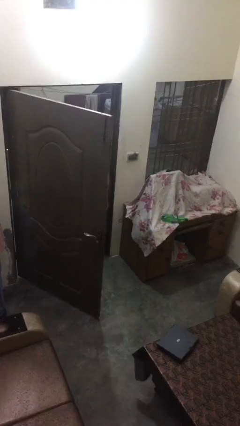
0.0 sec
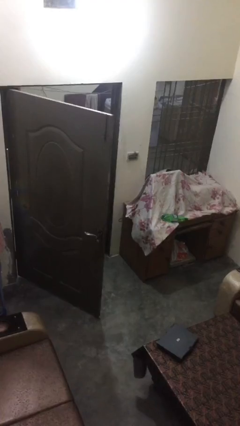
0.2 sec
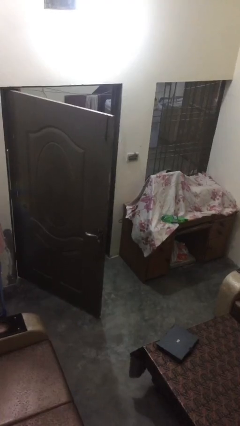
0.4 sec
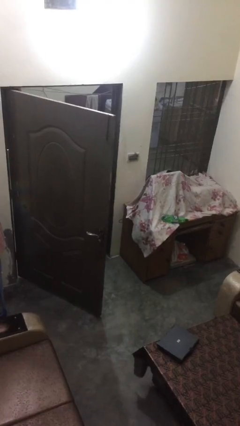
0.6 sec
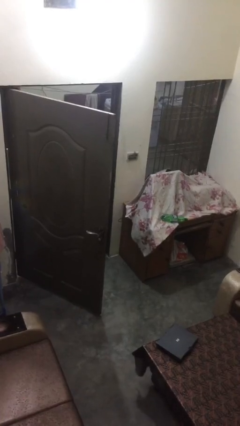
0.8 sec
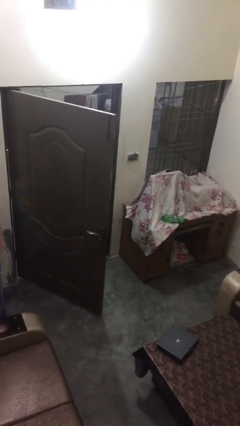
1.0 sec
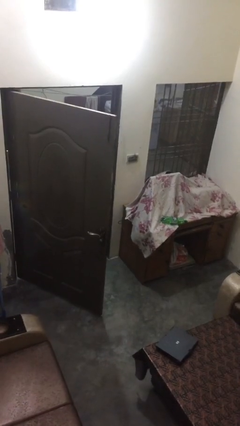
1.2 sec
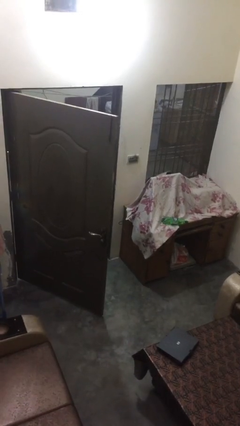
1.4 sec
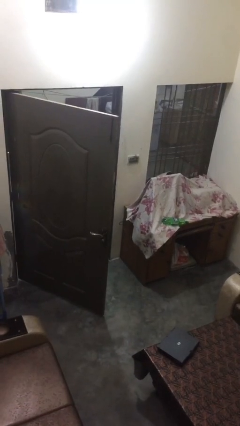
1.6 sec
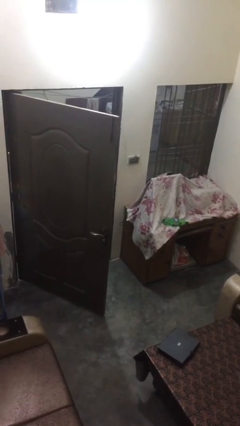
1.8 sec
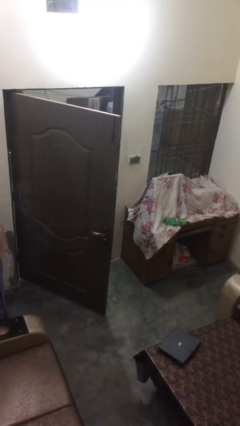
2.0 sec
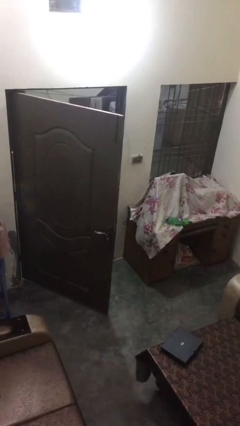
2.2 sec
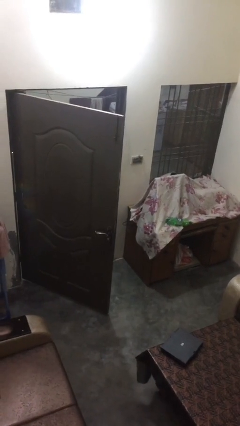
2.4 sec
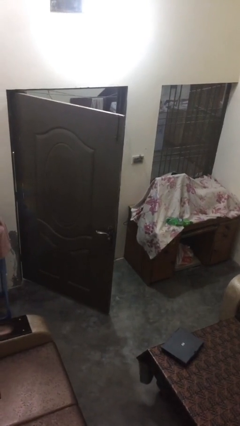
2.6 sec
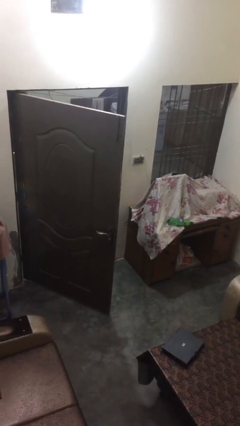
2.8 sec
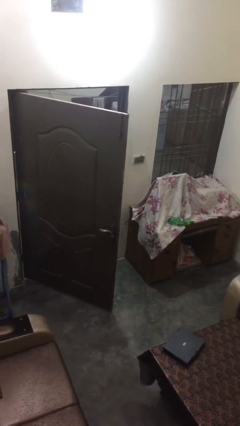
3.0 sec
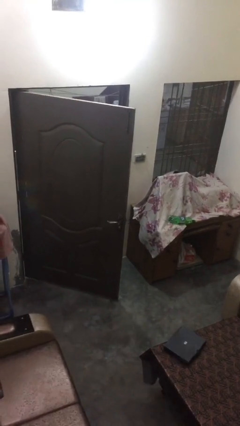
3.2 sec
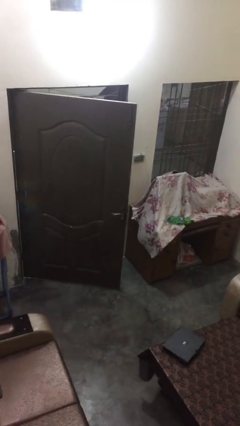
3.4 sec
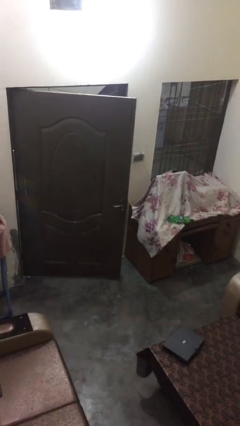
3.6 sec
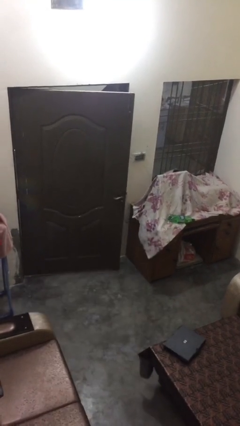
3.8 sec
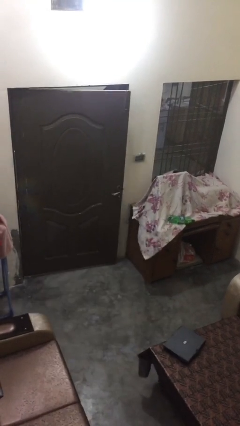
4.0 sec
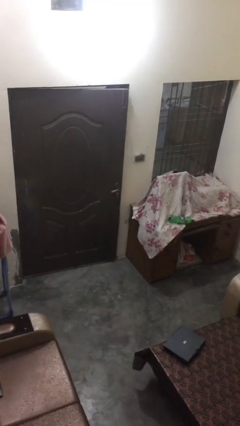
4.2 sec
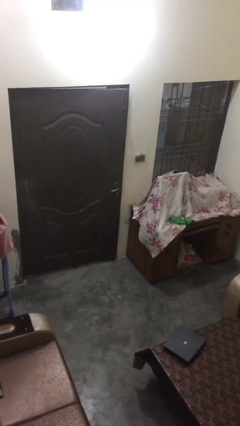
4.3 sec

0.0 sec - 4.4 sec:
person closes facility door

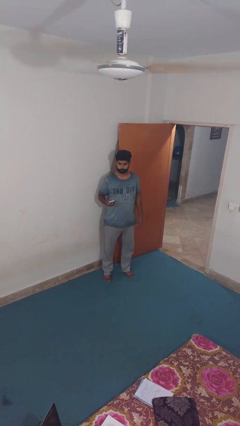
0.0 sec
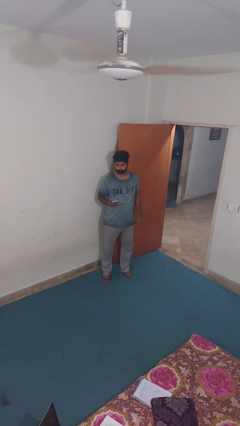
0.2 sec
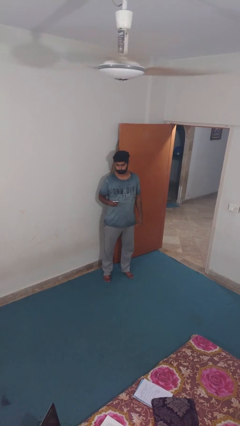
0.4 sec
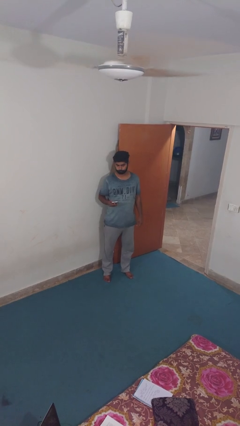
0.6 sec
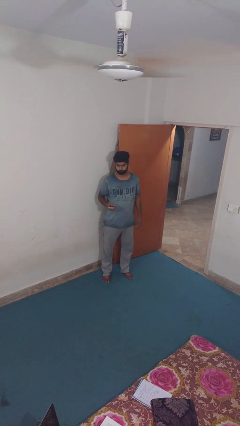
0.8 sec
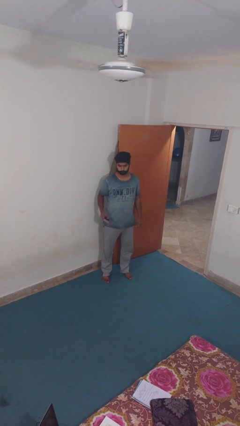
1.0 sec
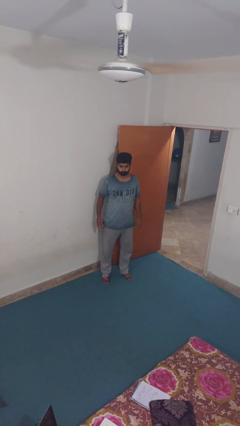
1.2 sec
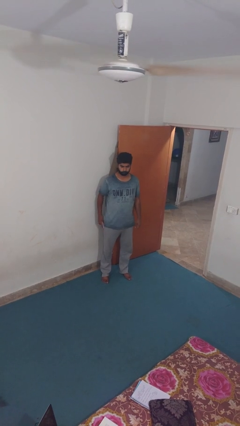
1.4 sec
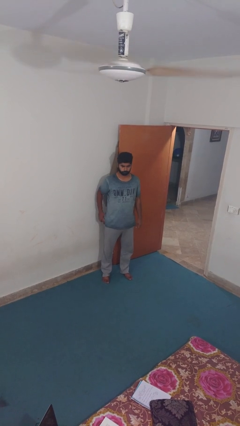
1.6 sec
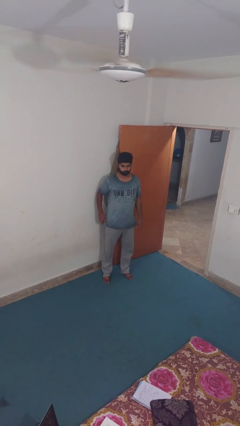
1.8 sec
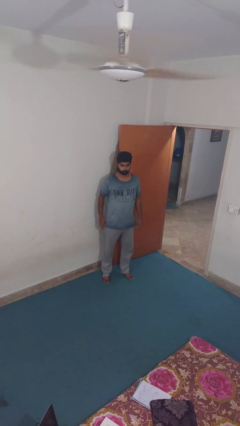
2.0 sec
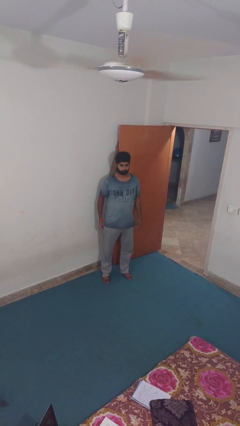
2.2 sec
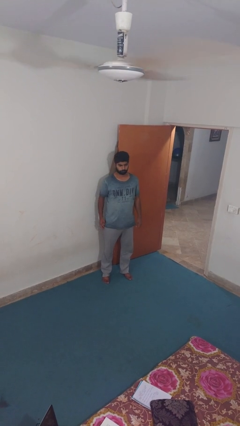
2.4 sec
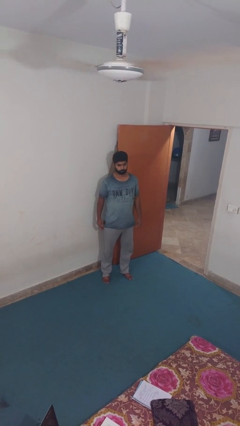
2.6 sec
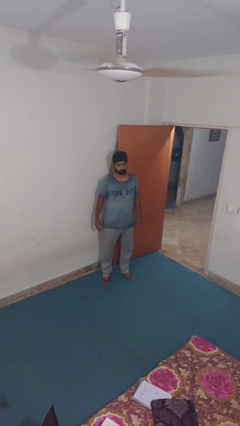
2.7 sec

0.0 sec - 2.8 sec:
person puts phone into pocket

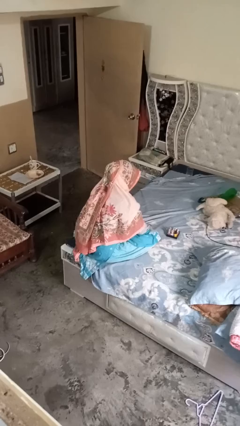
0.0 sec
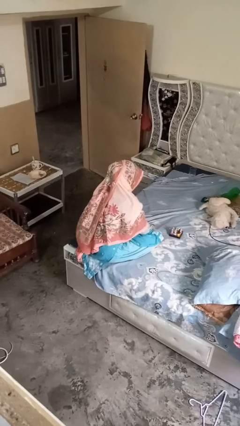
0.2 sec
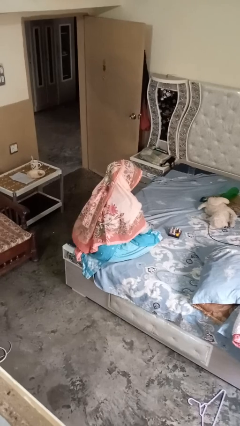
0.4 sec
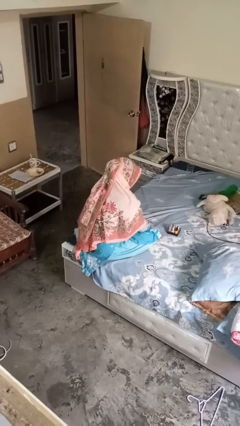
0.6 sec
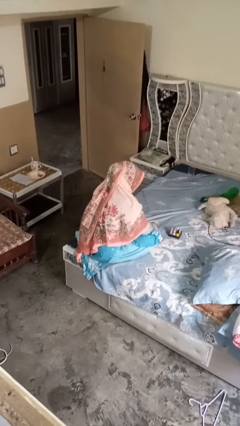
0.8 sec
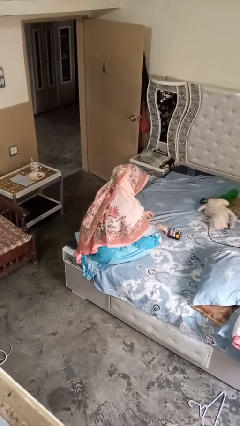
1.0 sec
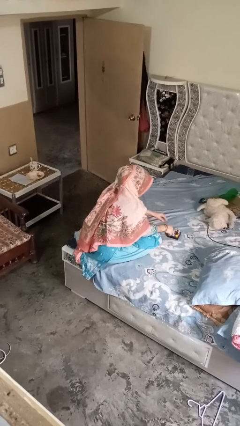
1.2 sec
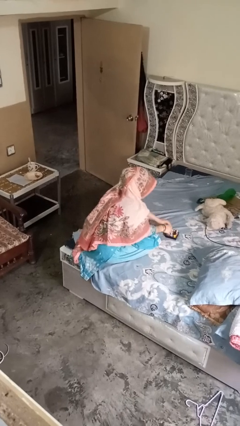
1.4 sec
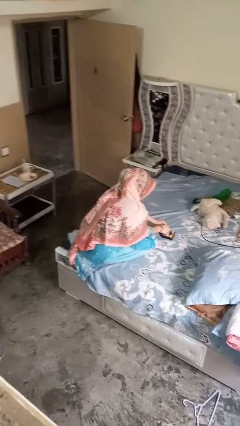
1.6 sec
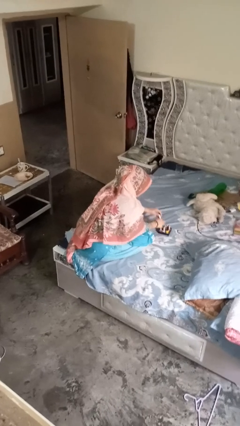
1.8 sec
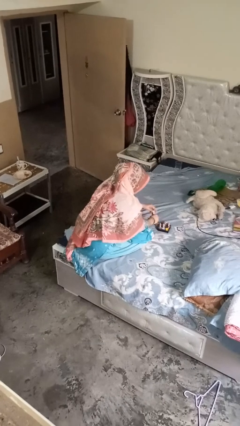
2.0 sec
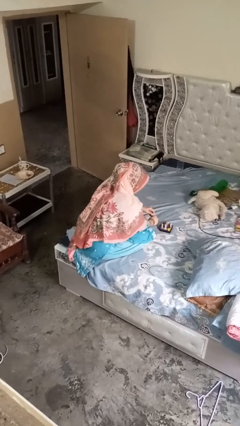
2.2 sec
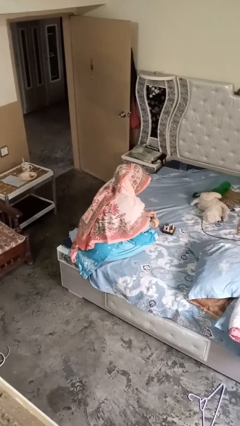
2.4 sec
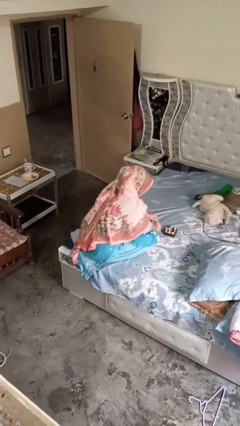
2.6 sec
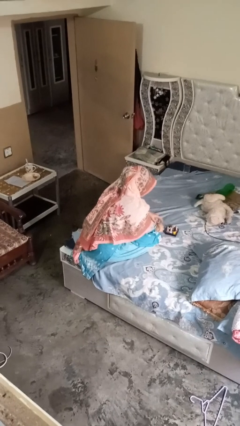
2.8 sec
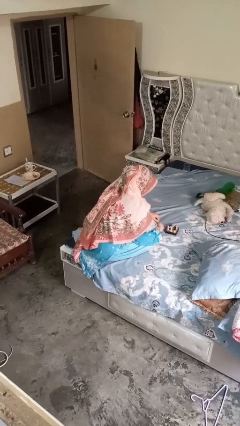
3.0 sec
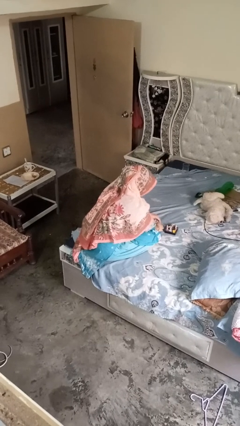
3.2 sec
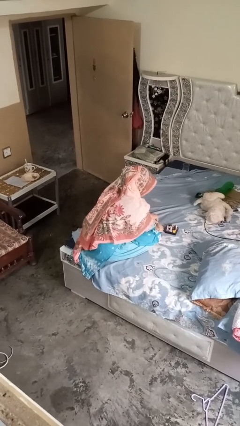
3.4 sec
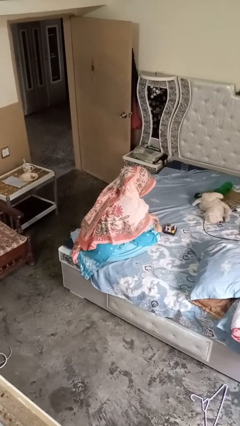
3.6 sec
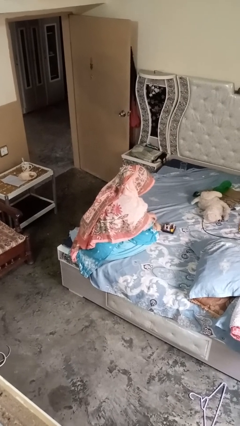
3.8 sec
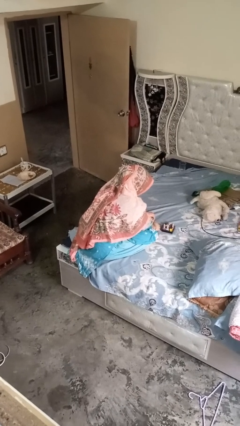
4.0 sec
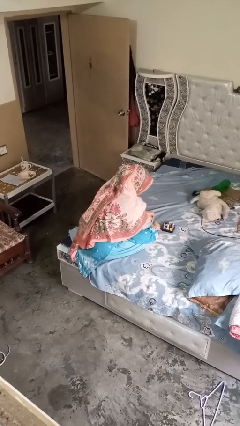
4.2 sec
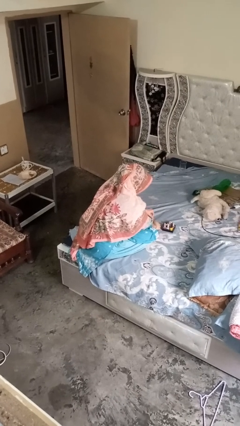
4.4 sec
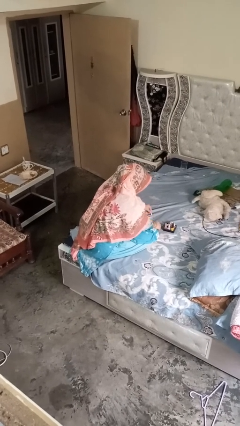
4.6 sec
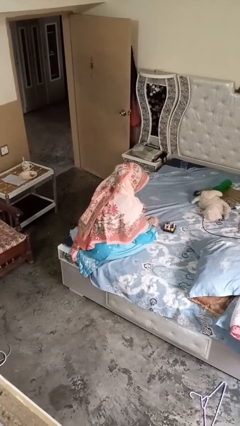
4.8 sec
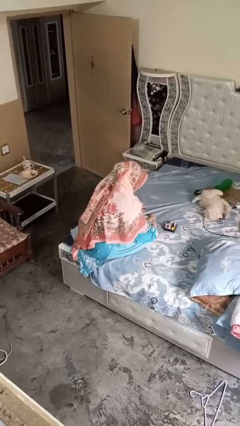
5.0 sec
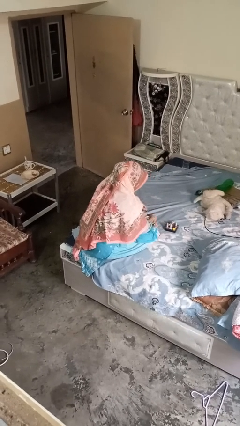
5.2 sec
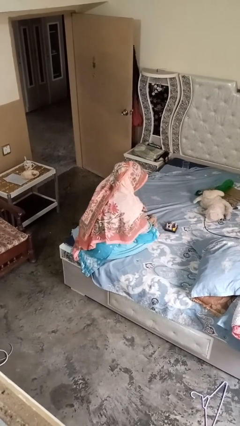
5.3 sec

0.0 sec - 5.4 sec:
person paints fingernails

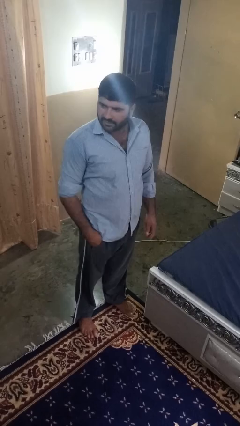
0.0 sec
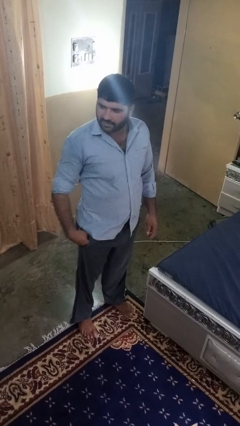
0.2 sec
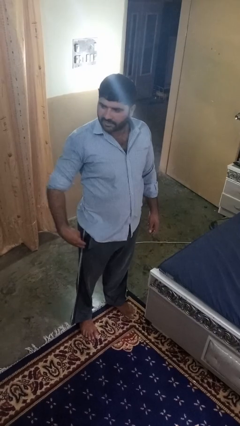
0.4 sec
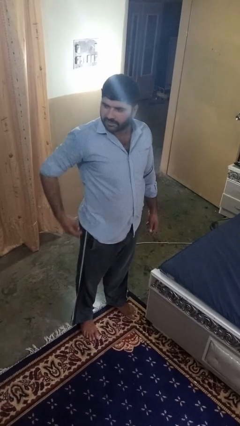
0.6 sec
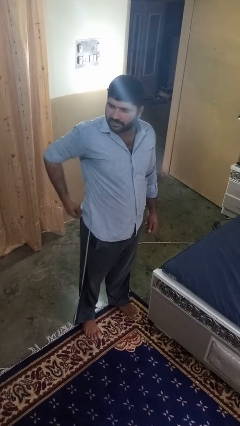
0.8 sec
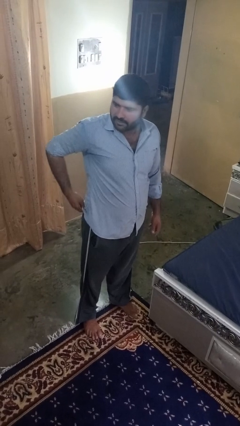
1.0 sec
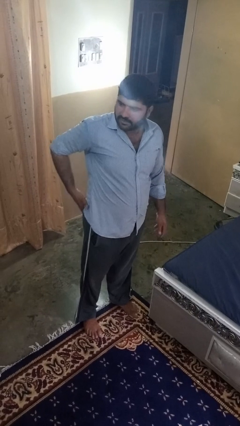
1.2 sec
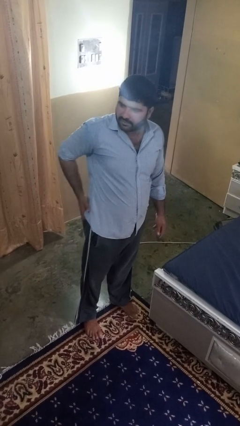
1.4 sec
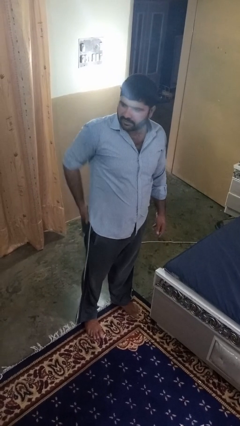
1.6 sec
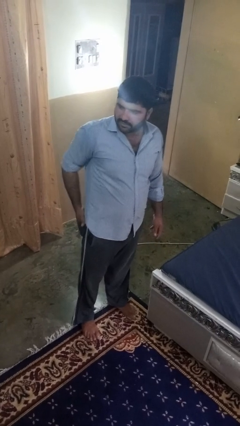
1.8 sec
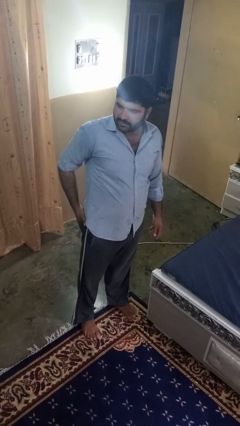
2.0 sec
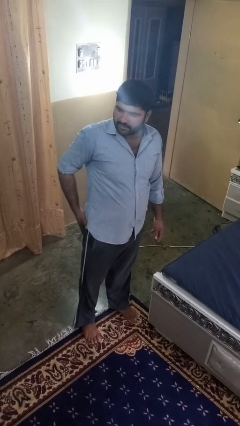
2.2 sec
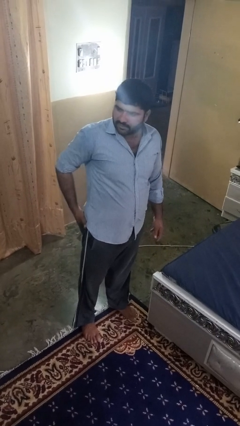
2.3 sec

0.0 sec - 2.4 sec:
person puts hands in back pockets

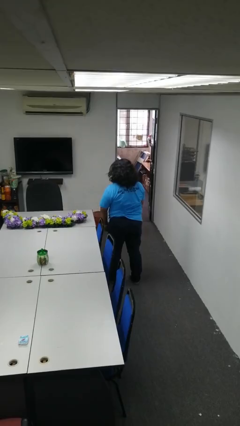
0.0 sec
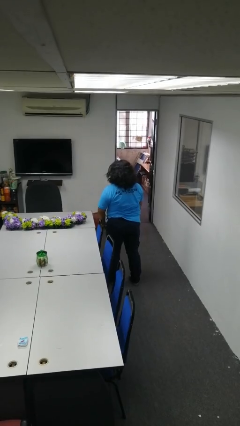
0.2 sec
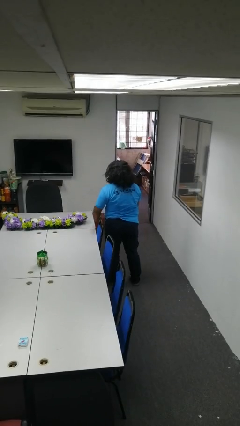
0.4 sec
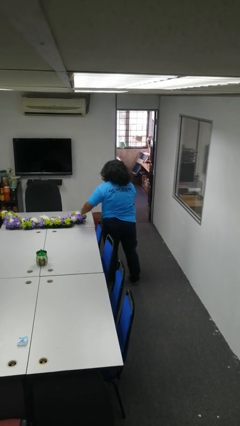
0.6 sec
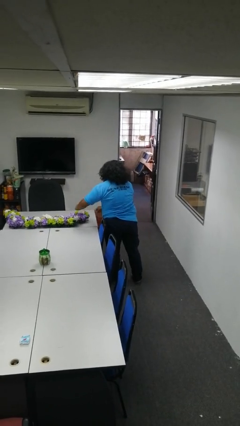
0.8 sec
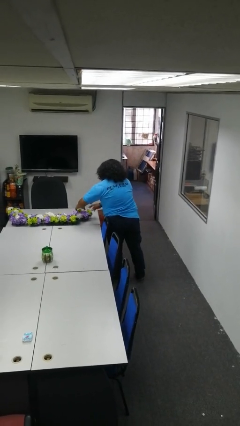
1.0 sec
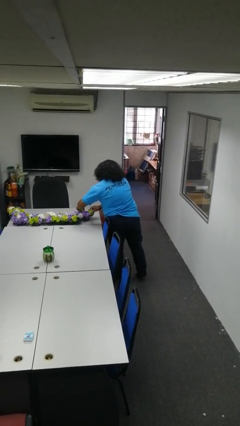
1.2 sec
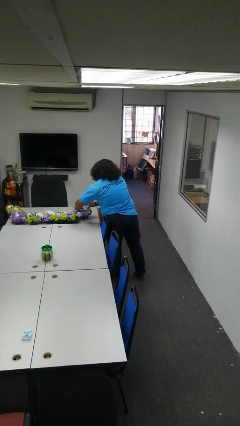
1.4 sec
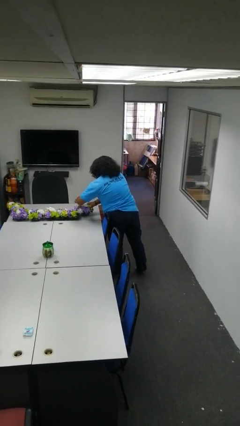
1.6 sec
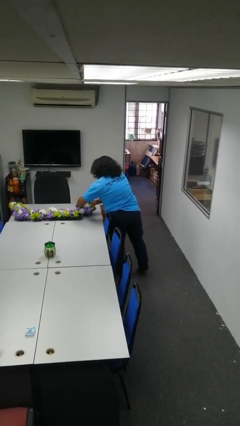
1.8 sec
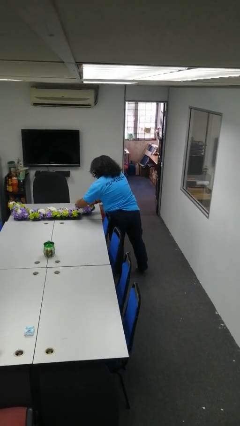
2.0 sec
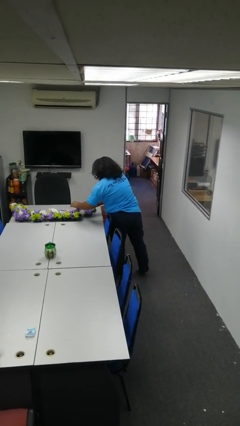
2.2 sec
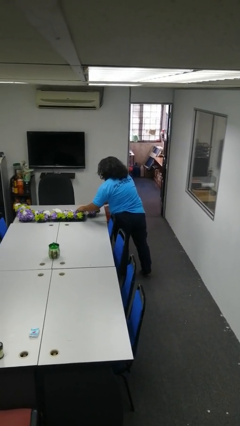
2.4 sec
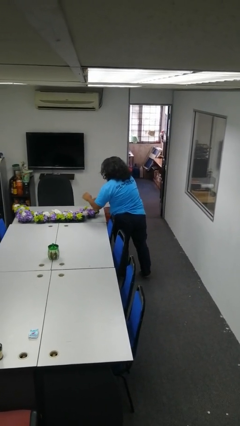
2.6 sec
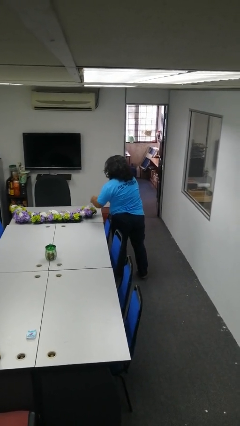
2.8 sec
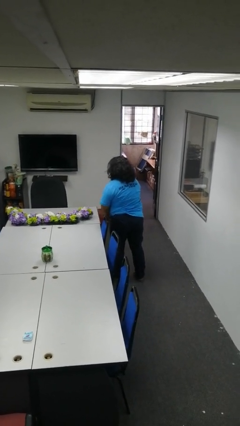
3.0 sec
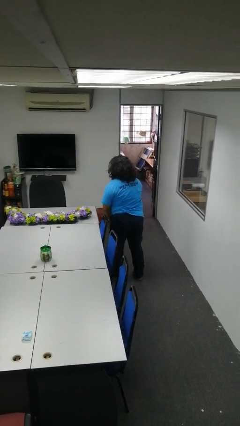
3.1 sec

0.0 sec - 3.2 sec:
person arranges flowers in vase
